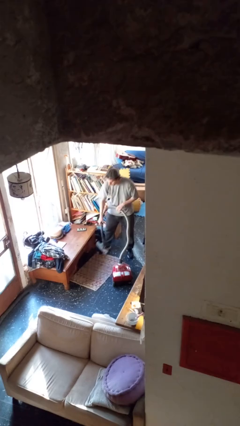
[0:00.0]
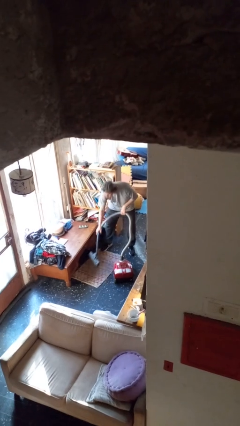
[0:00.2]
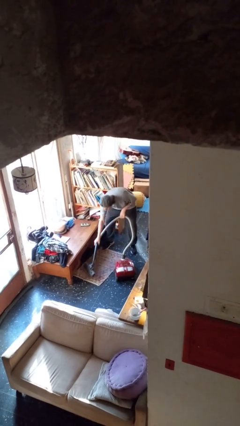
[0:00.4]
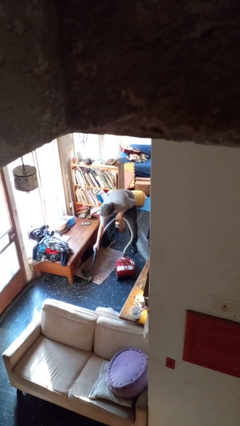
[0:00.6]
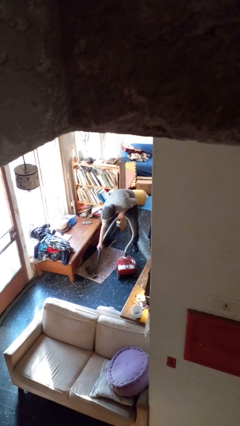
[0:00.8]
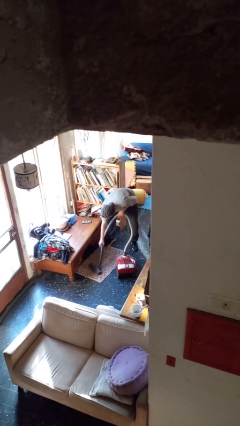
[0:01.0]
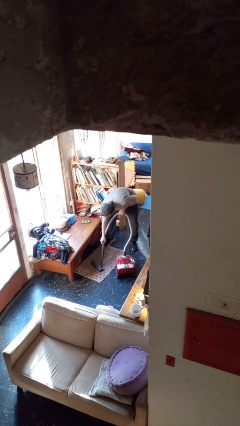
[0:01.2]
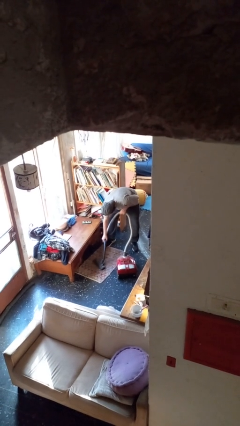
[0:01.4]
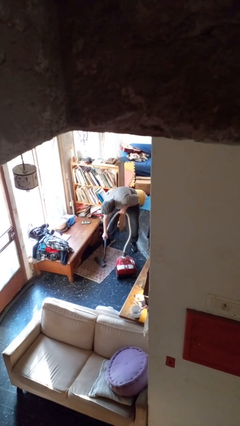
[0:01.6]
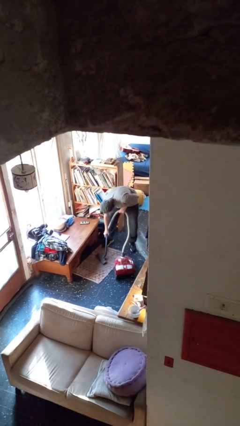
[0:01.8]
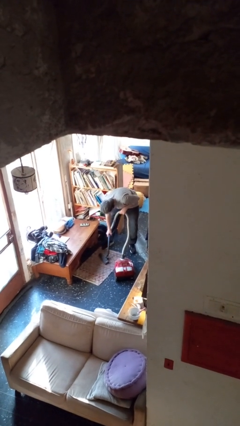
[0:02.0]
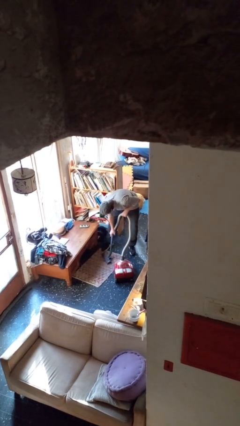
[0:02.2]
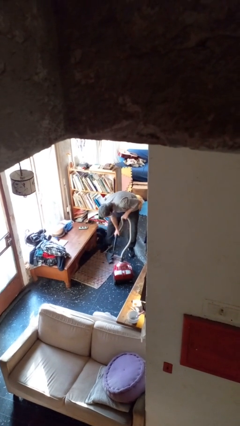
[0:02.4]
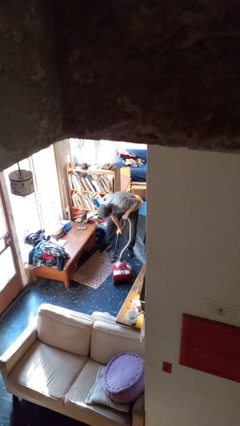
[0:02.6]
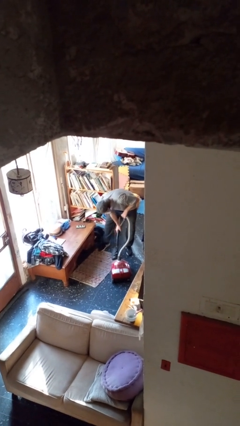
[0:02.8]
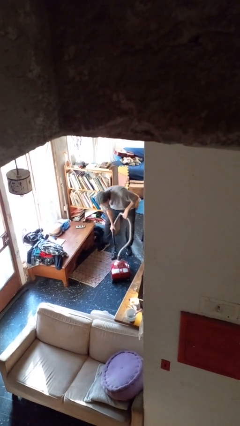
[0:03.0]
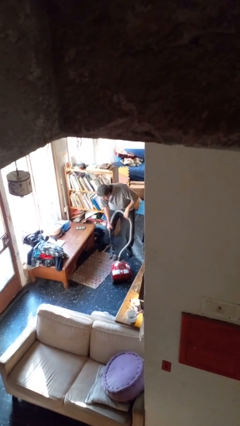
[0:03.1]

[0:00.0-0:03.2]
person vacuums carpet

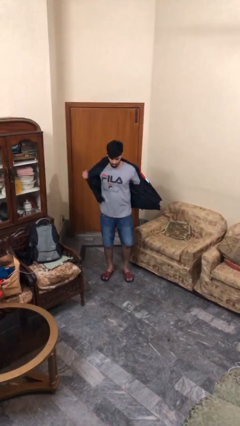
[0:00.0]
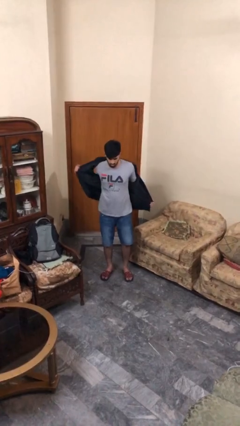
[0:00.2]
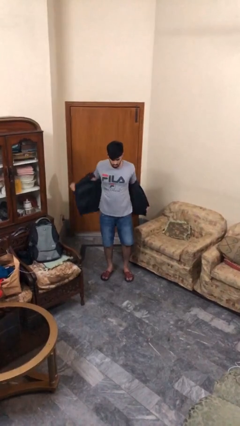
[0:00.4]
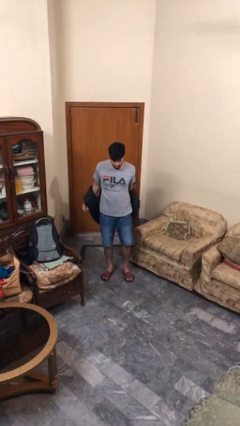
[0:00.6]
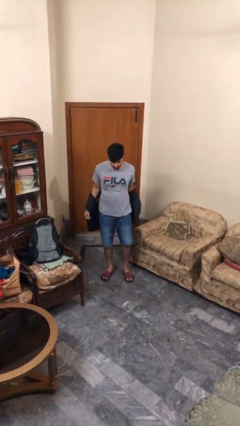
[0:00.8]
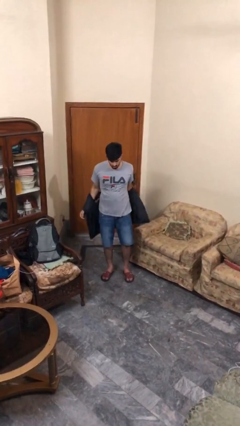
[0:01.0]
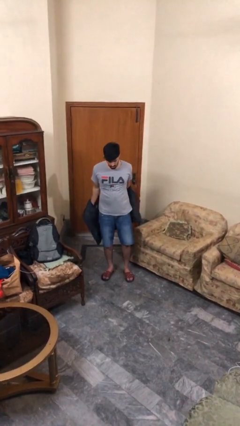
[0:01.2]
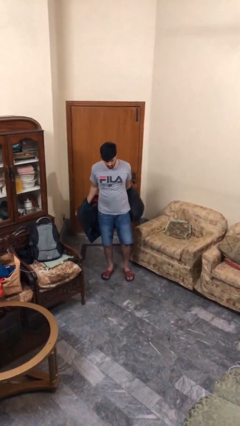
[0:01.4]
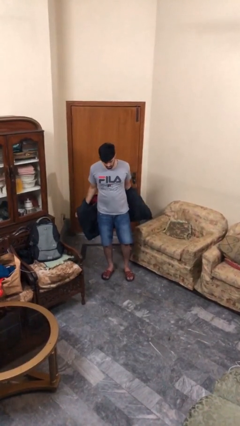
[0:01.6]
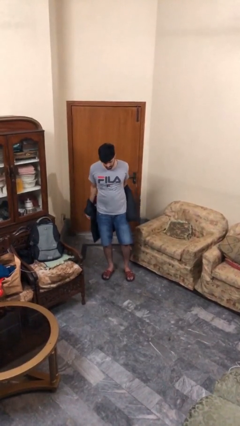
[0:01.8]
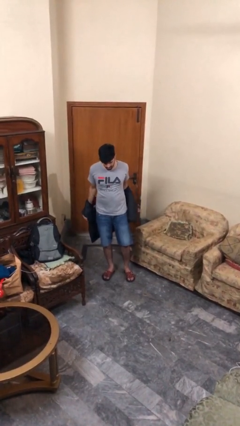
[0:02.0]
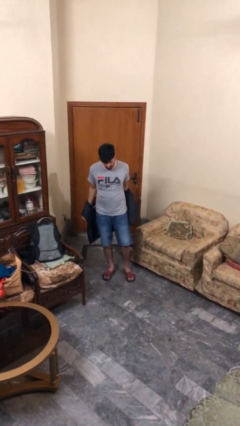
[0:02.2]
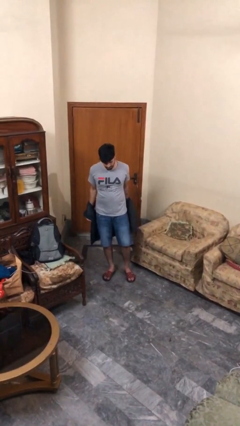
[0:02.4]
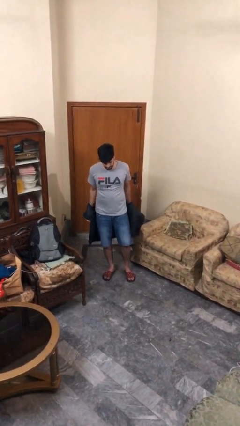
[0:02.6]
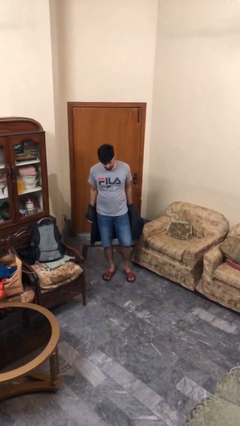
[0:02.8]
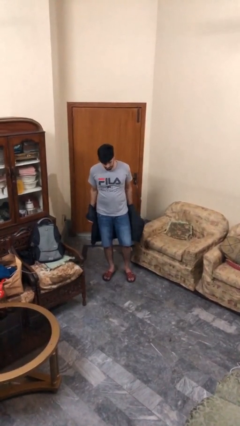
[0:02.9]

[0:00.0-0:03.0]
person takes off jacket

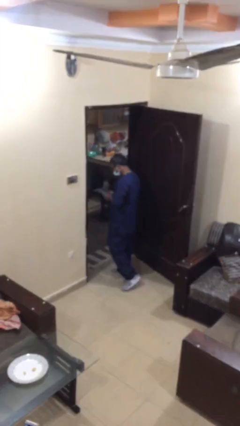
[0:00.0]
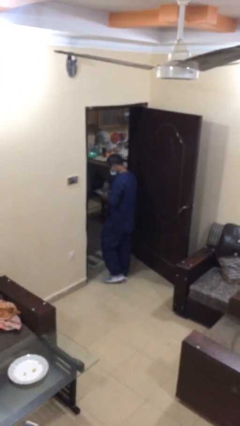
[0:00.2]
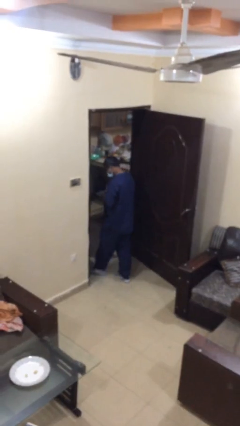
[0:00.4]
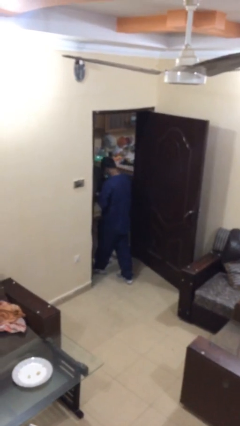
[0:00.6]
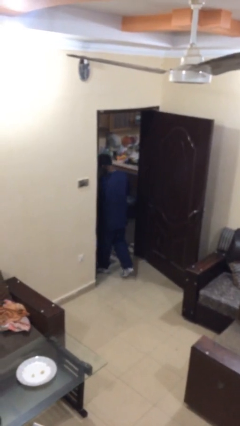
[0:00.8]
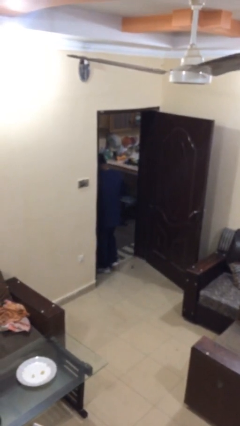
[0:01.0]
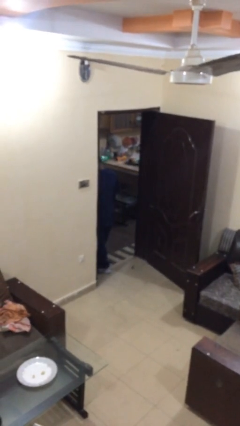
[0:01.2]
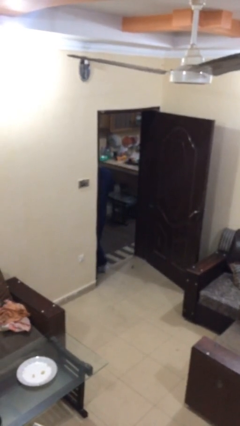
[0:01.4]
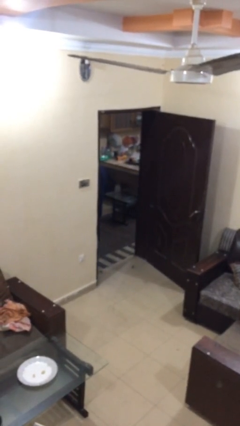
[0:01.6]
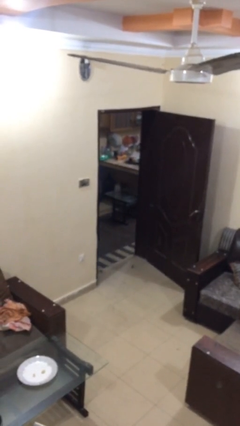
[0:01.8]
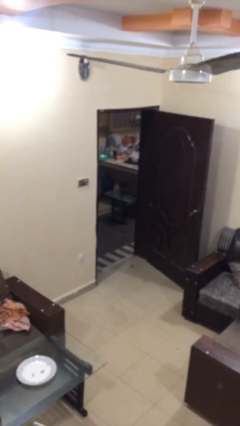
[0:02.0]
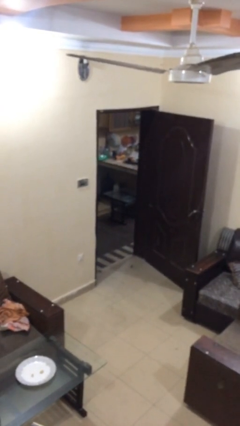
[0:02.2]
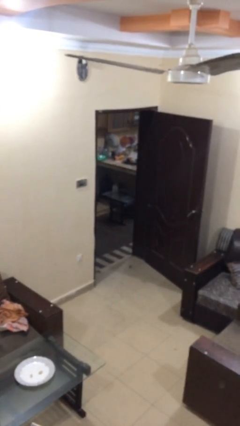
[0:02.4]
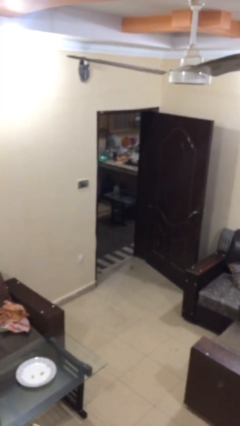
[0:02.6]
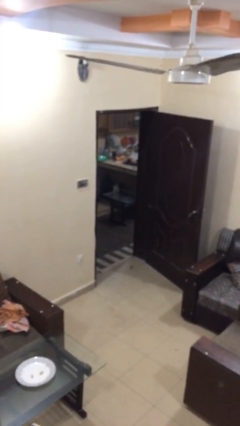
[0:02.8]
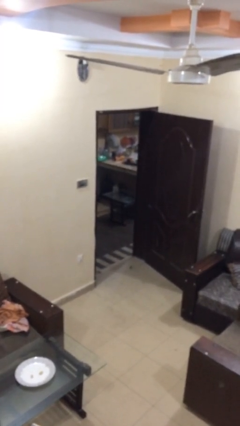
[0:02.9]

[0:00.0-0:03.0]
person exits scene through structure

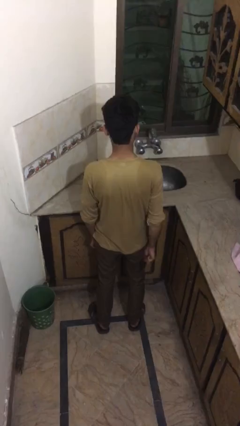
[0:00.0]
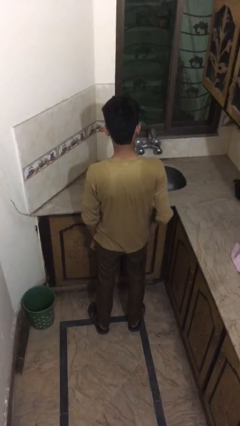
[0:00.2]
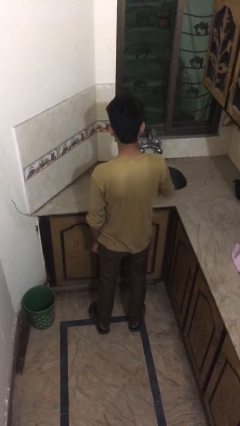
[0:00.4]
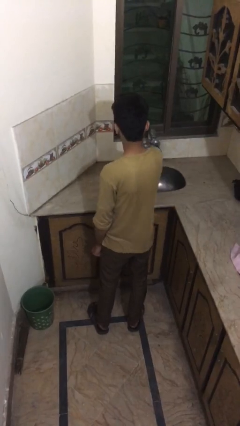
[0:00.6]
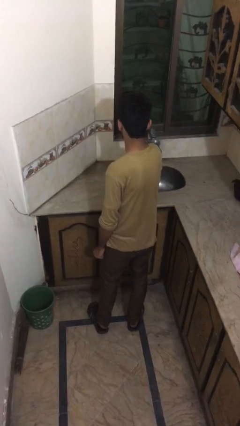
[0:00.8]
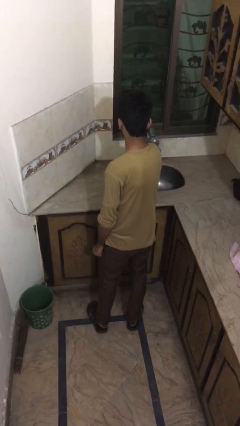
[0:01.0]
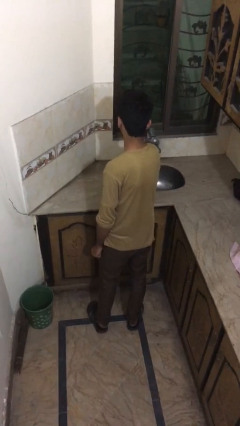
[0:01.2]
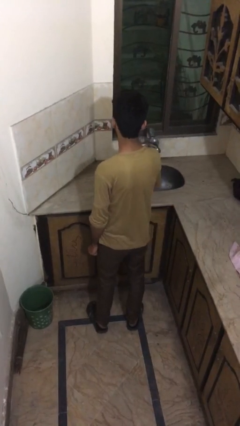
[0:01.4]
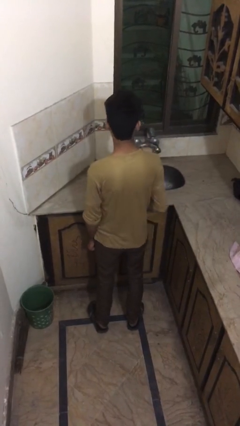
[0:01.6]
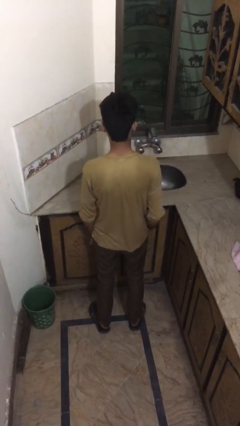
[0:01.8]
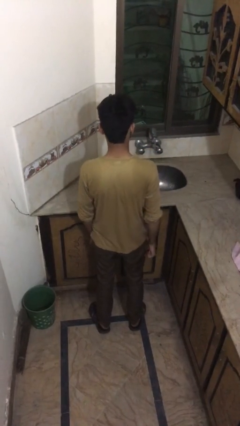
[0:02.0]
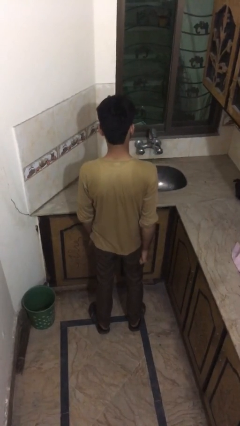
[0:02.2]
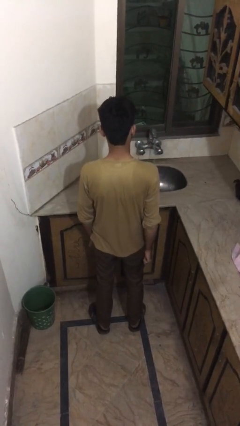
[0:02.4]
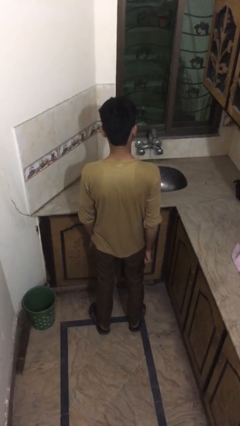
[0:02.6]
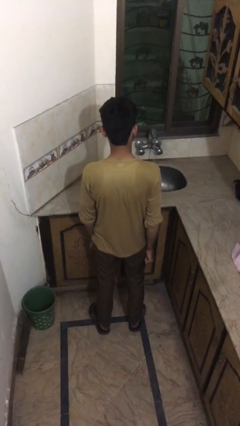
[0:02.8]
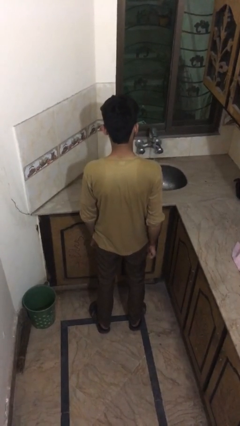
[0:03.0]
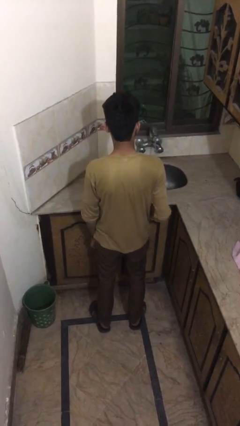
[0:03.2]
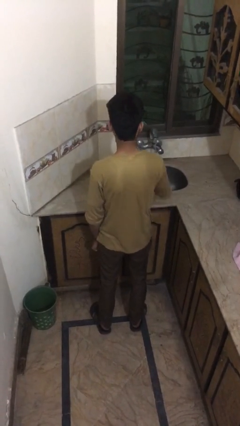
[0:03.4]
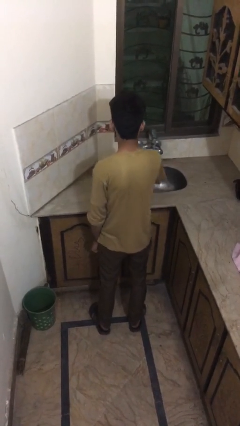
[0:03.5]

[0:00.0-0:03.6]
person turns on faucet

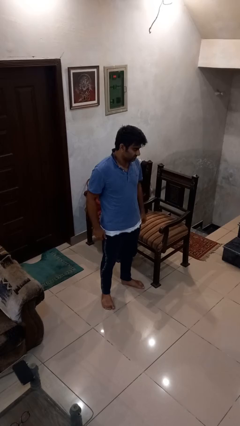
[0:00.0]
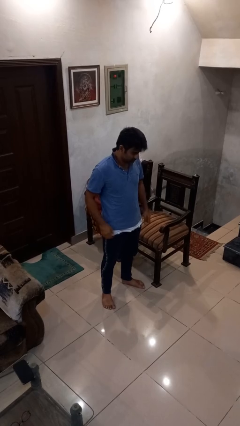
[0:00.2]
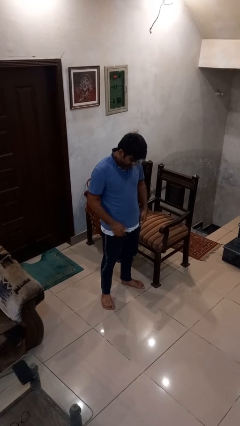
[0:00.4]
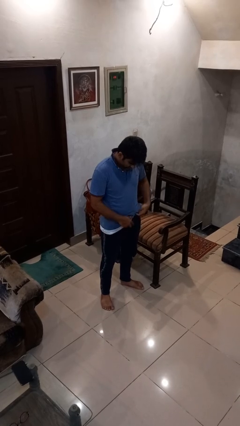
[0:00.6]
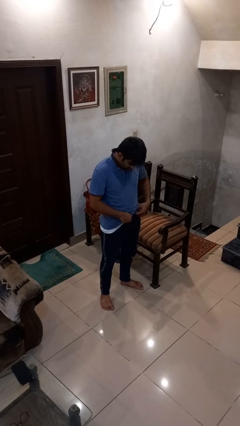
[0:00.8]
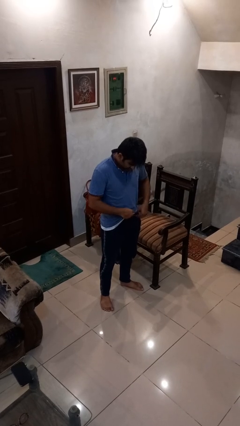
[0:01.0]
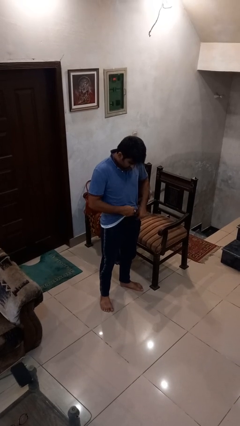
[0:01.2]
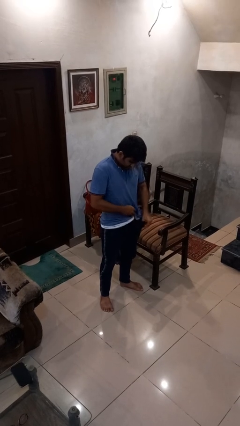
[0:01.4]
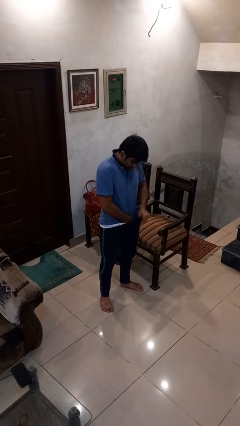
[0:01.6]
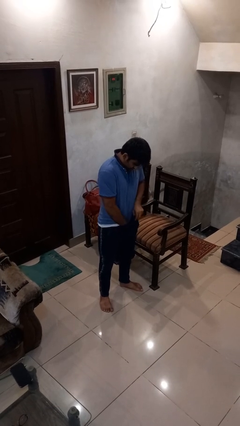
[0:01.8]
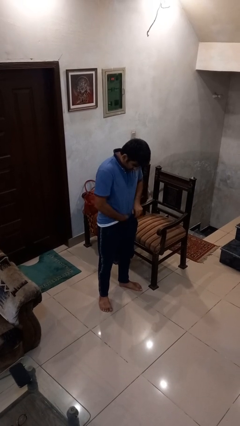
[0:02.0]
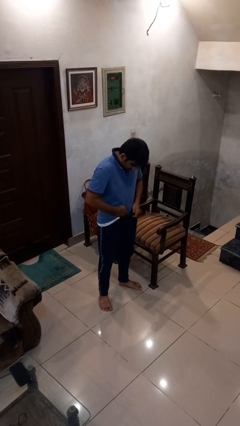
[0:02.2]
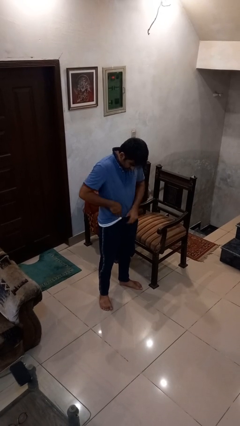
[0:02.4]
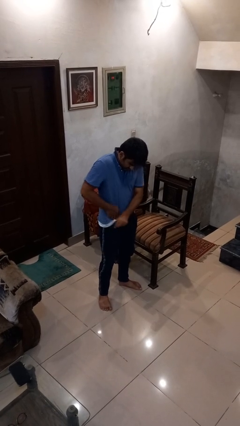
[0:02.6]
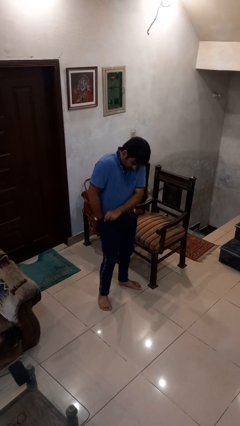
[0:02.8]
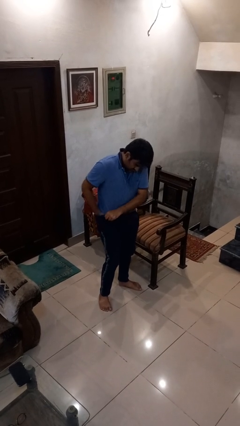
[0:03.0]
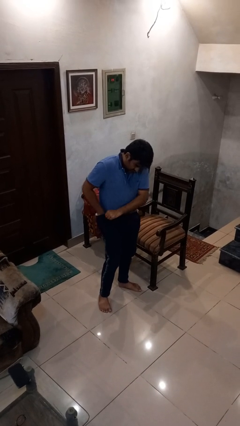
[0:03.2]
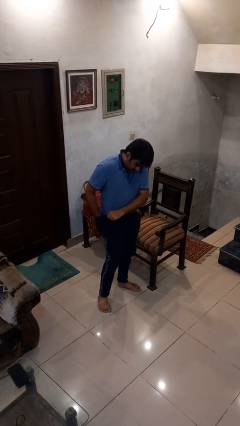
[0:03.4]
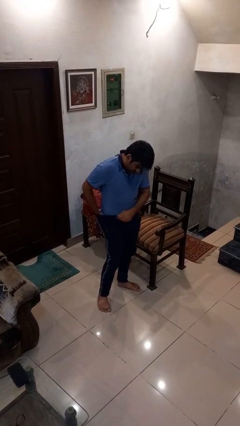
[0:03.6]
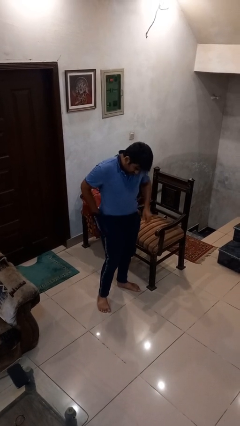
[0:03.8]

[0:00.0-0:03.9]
person tucks in shirt

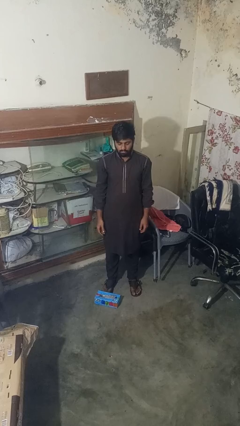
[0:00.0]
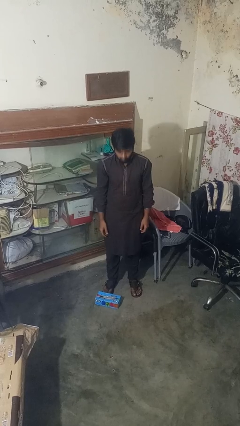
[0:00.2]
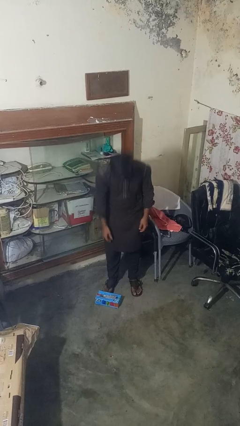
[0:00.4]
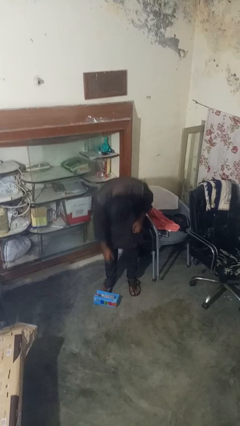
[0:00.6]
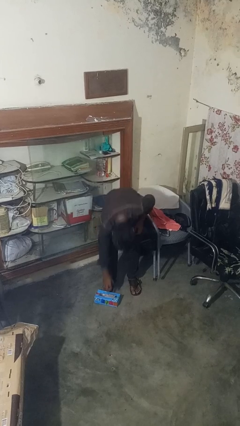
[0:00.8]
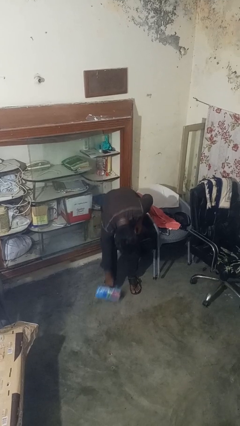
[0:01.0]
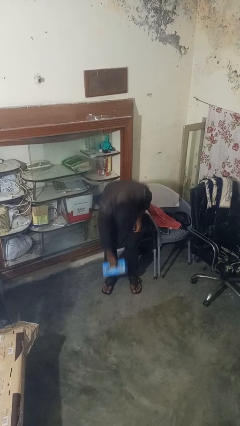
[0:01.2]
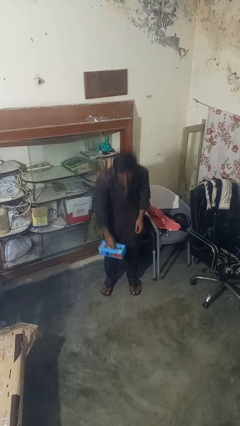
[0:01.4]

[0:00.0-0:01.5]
person picks up object from floor
